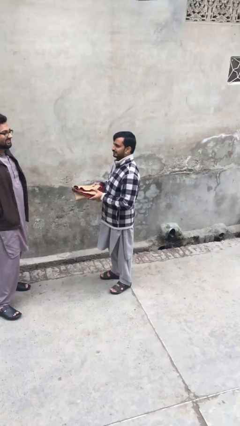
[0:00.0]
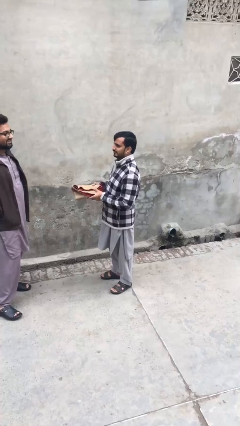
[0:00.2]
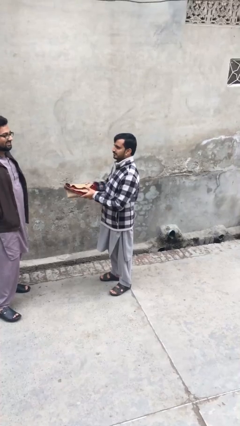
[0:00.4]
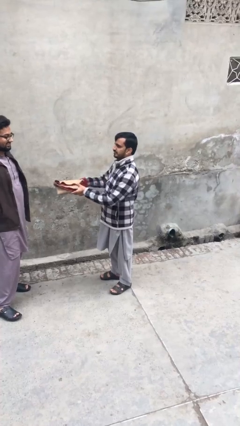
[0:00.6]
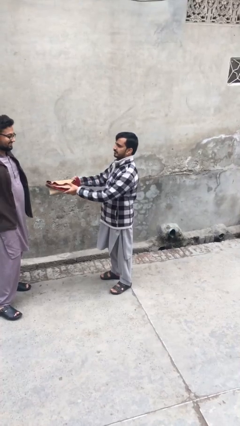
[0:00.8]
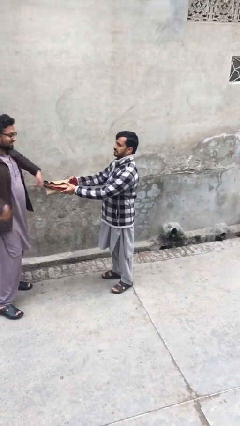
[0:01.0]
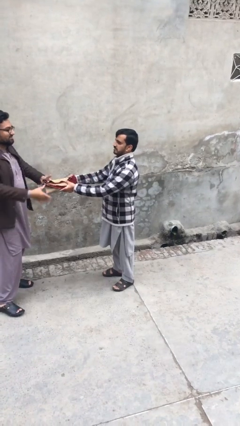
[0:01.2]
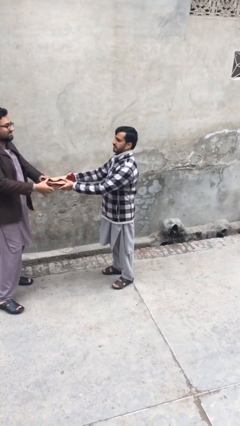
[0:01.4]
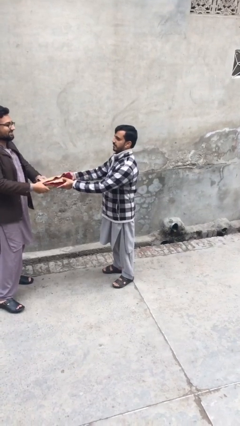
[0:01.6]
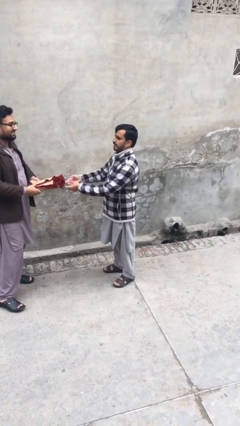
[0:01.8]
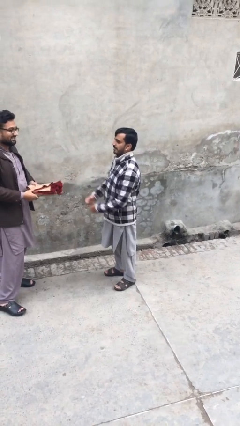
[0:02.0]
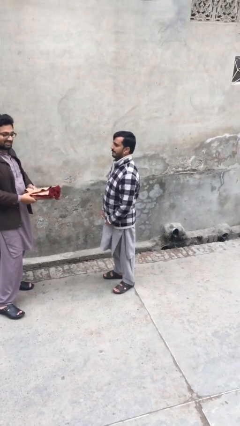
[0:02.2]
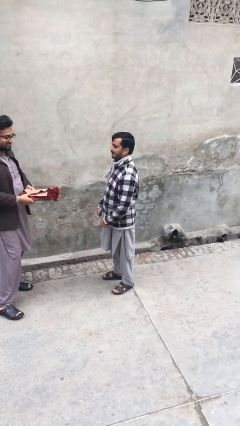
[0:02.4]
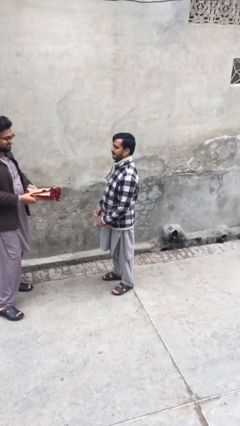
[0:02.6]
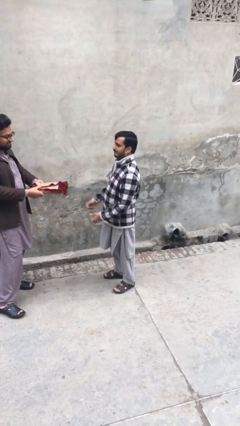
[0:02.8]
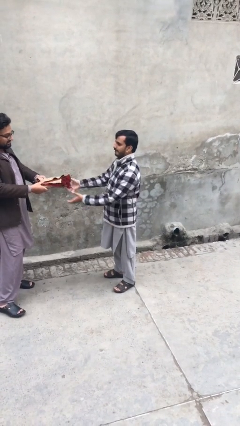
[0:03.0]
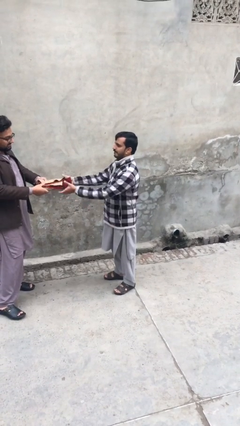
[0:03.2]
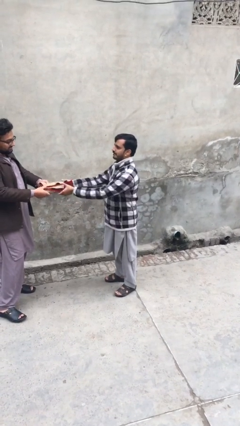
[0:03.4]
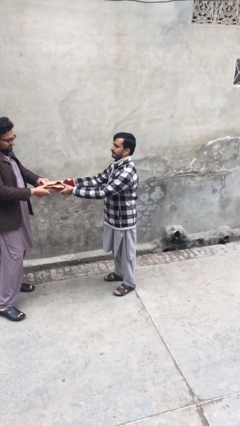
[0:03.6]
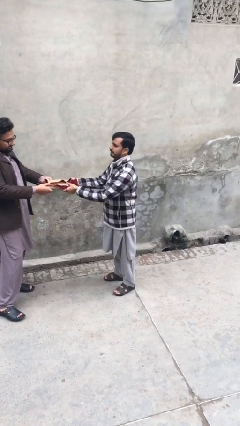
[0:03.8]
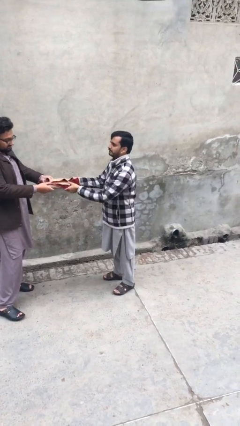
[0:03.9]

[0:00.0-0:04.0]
person transfers object to person

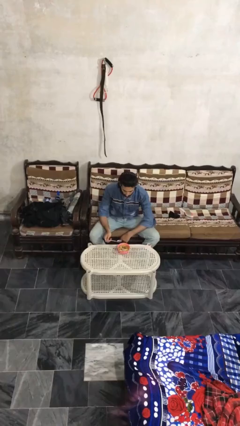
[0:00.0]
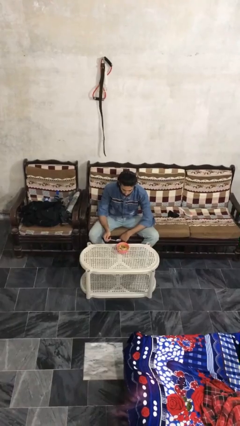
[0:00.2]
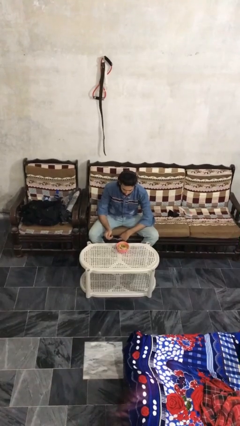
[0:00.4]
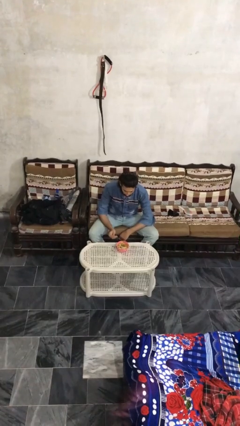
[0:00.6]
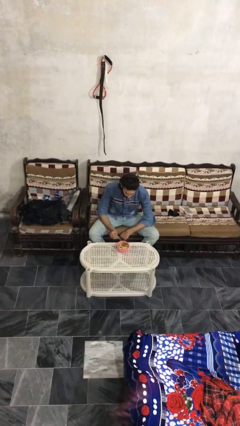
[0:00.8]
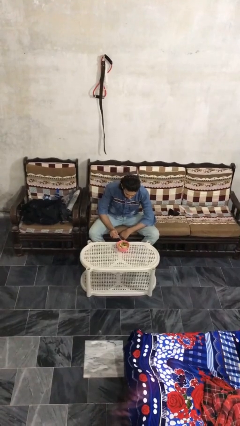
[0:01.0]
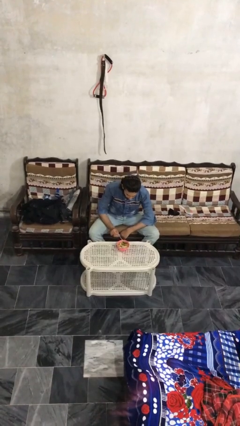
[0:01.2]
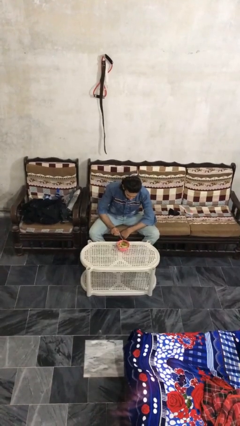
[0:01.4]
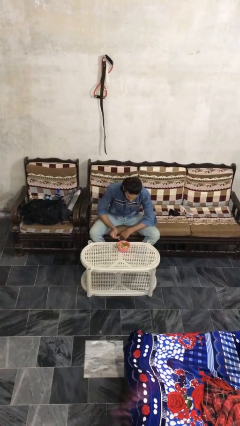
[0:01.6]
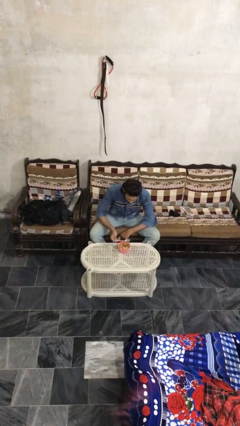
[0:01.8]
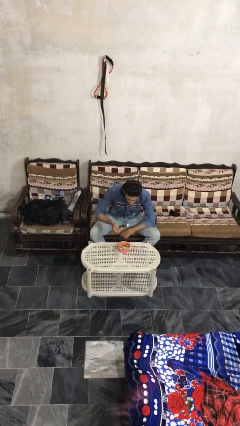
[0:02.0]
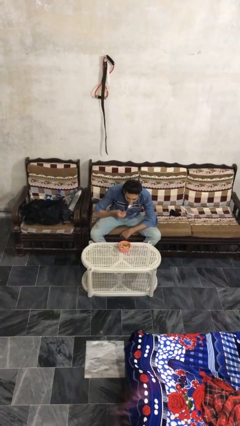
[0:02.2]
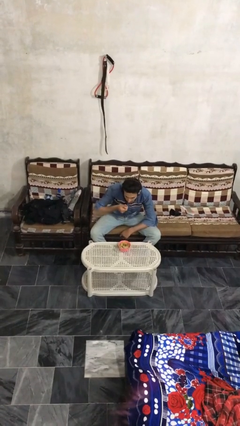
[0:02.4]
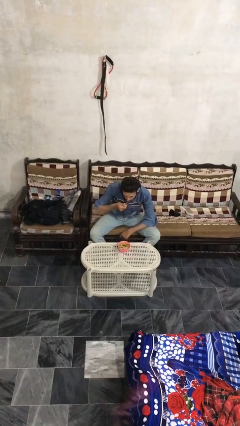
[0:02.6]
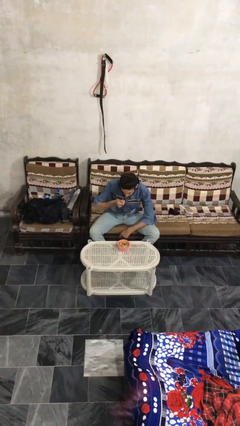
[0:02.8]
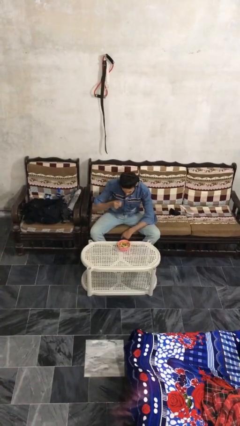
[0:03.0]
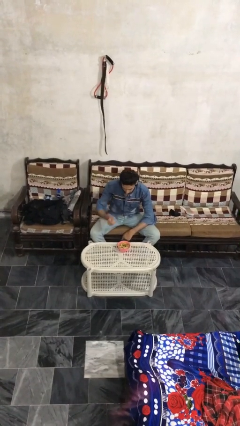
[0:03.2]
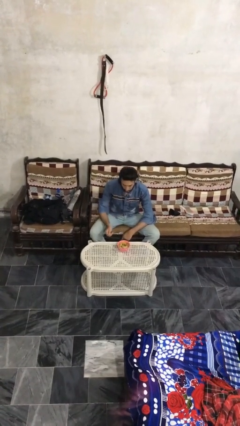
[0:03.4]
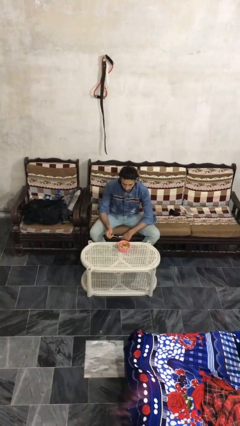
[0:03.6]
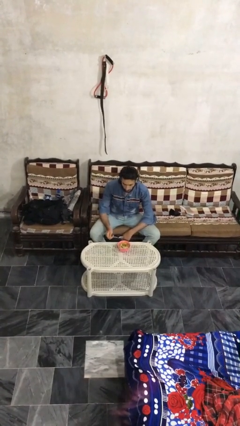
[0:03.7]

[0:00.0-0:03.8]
person eats with utensil

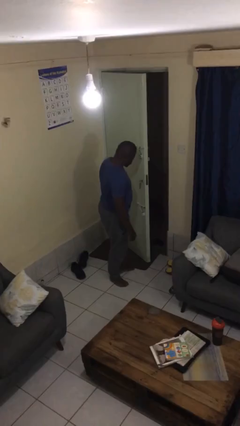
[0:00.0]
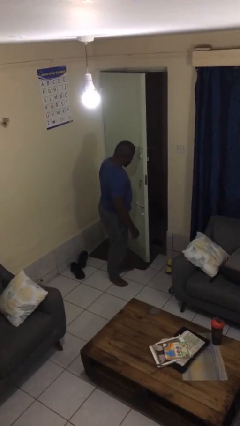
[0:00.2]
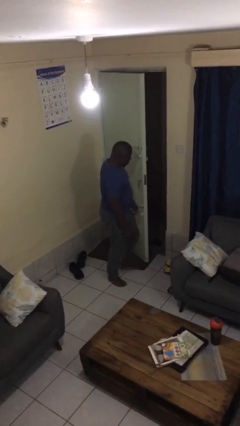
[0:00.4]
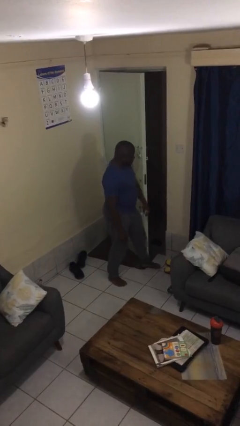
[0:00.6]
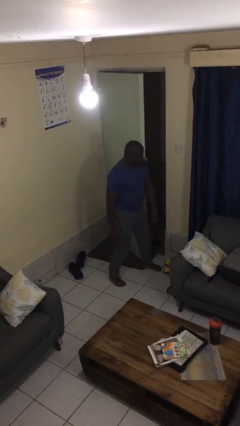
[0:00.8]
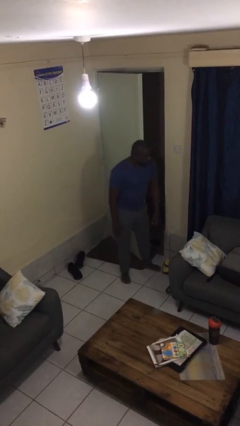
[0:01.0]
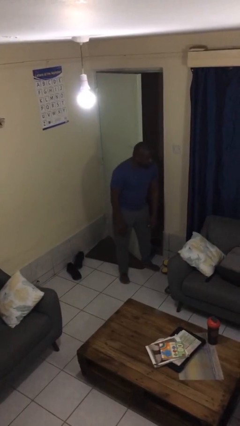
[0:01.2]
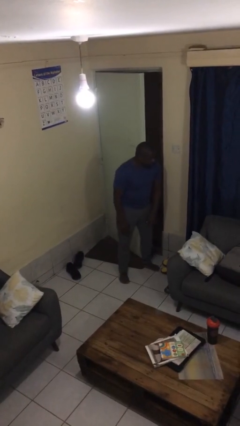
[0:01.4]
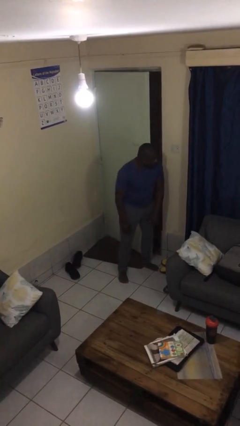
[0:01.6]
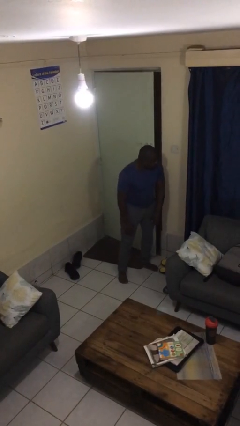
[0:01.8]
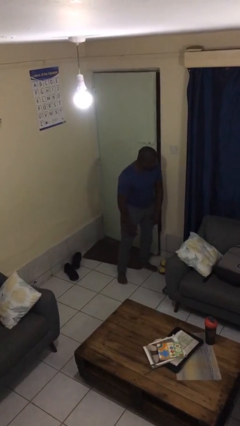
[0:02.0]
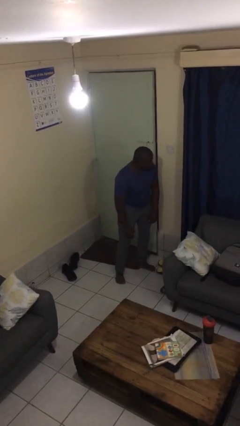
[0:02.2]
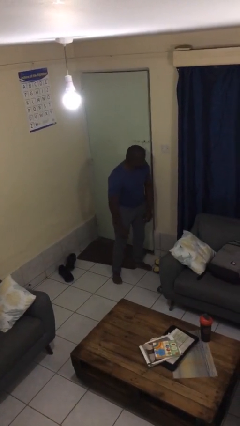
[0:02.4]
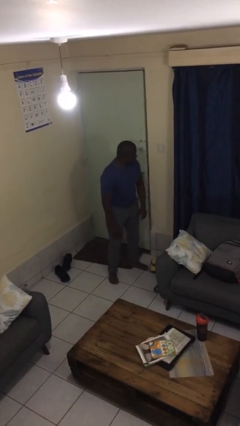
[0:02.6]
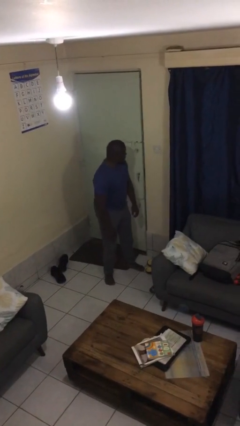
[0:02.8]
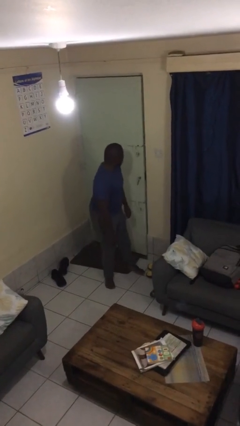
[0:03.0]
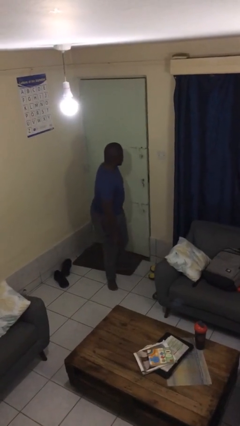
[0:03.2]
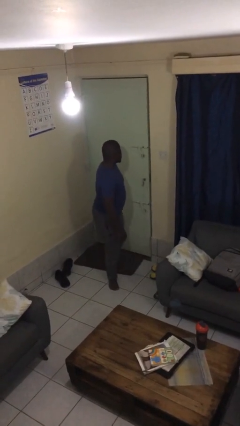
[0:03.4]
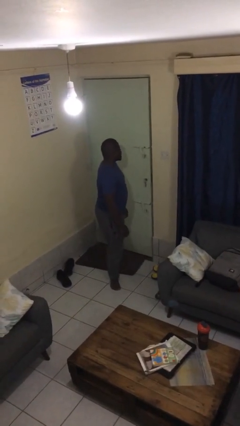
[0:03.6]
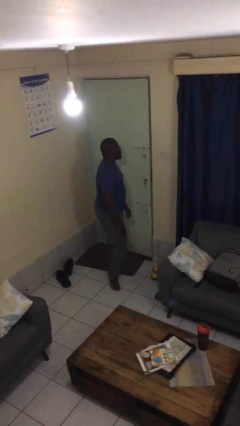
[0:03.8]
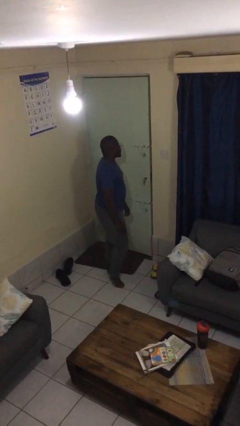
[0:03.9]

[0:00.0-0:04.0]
person closes door with hip

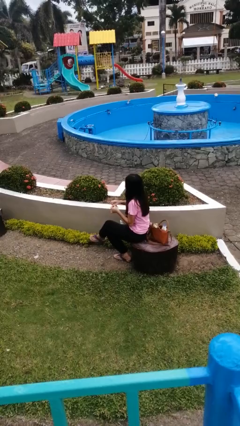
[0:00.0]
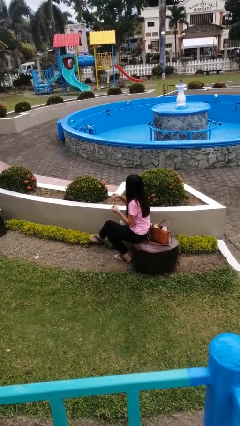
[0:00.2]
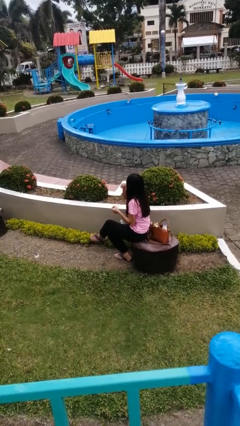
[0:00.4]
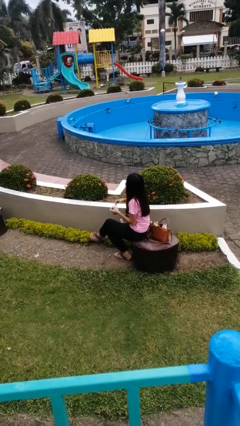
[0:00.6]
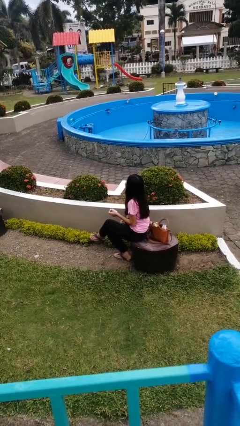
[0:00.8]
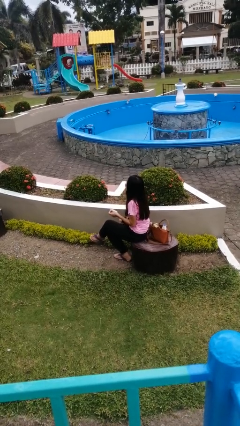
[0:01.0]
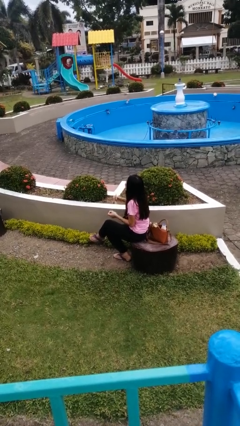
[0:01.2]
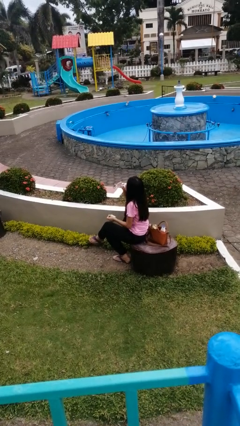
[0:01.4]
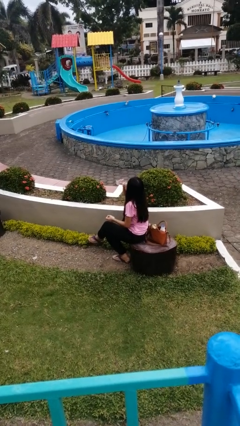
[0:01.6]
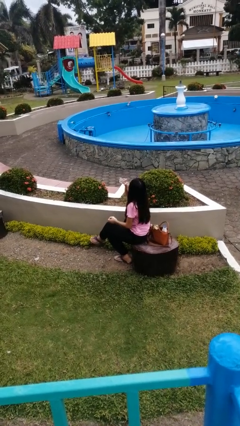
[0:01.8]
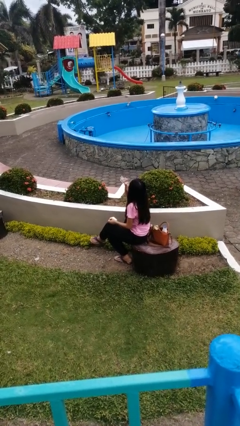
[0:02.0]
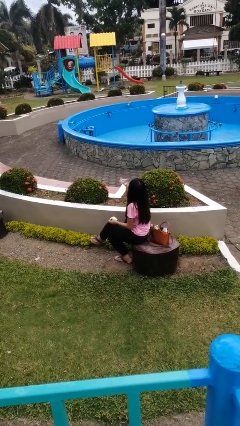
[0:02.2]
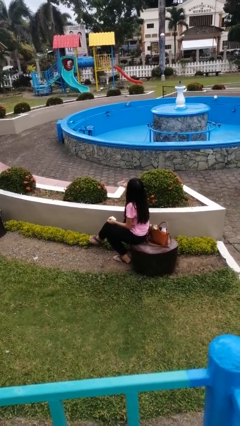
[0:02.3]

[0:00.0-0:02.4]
person drinks from cup

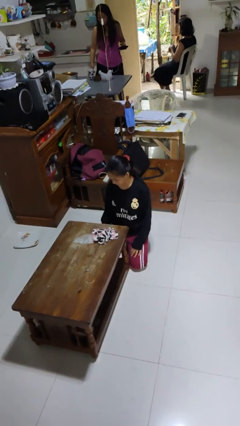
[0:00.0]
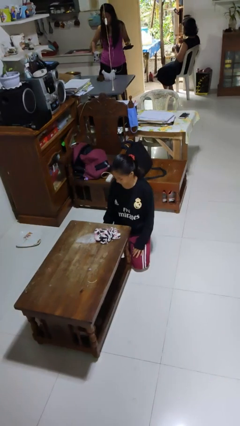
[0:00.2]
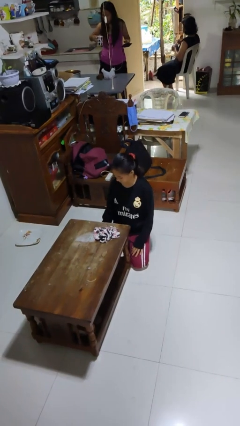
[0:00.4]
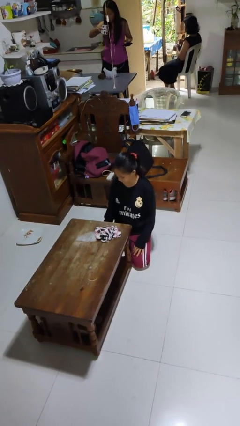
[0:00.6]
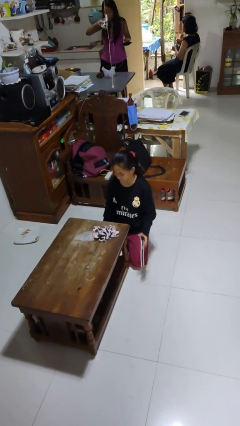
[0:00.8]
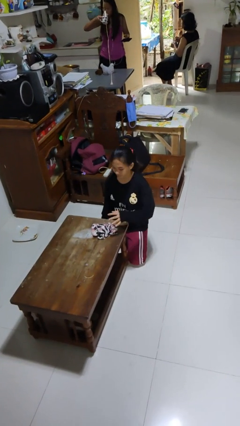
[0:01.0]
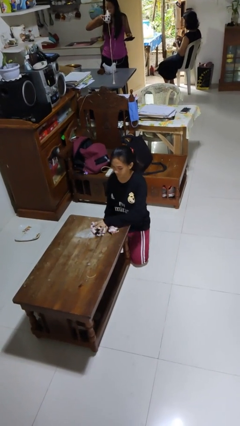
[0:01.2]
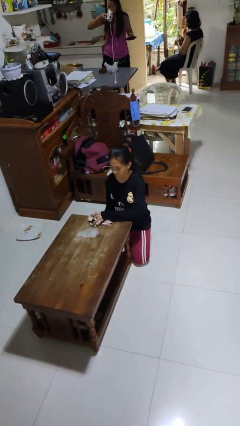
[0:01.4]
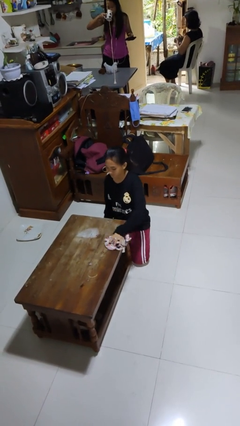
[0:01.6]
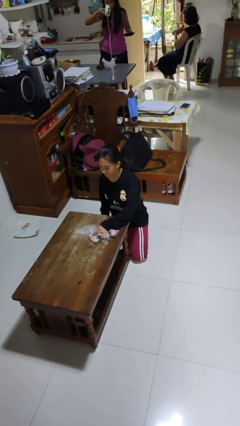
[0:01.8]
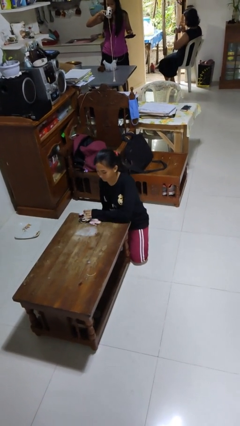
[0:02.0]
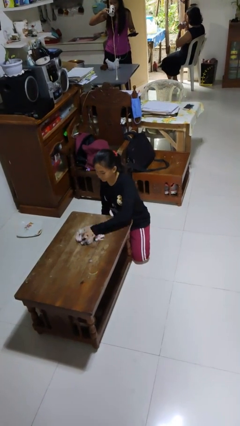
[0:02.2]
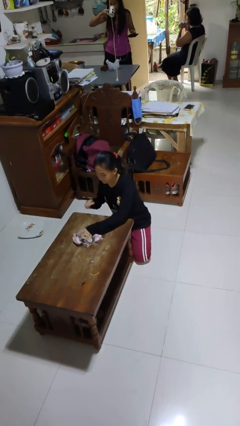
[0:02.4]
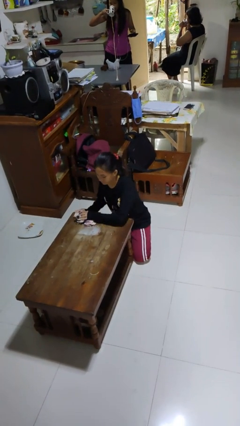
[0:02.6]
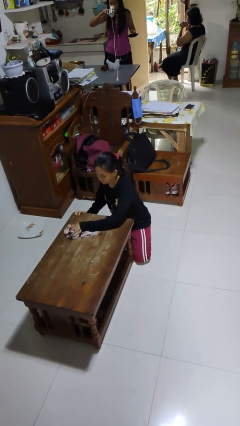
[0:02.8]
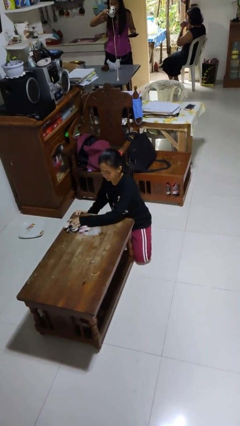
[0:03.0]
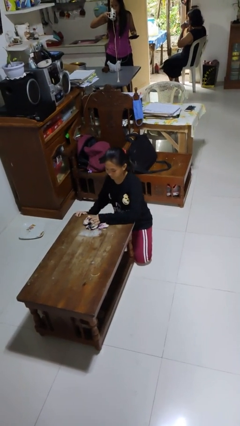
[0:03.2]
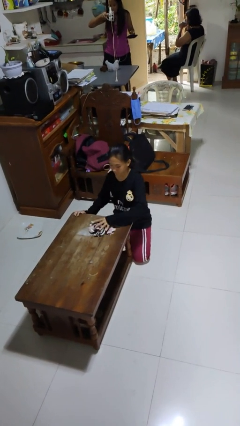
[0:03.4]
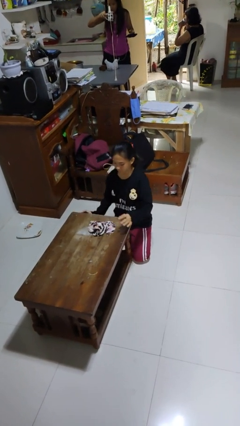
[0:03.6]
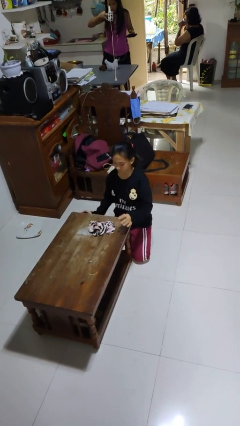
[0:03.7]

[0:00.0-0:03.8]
person cleans table with rag
